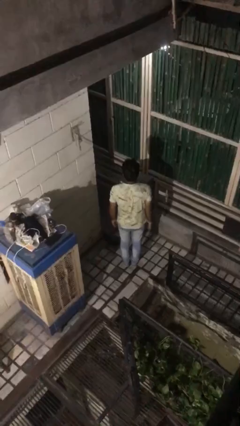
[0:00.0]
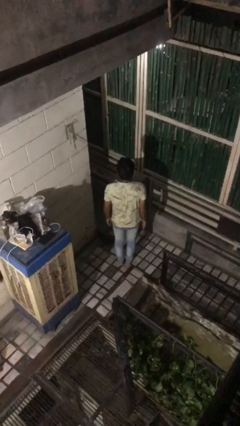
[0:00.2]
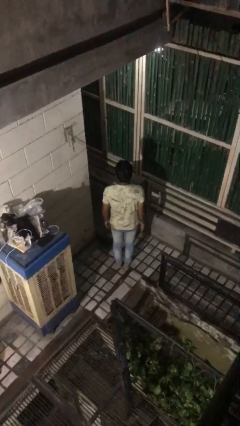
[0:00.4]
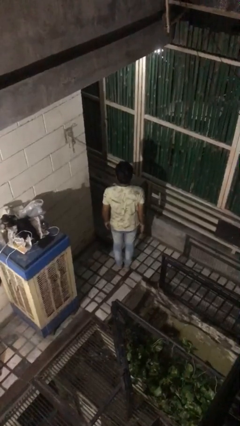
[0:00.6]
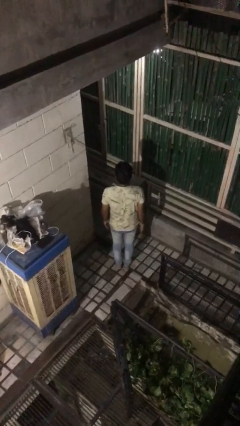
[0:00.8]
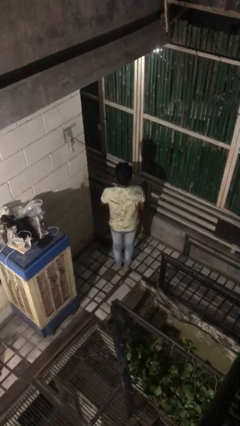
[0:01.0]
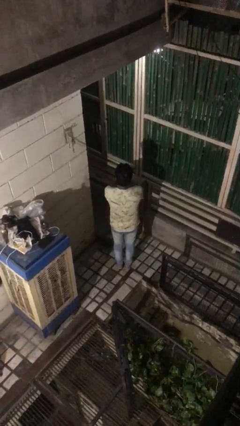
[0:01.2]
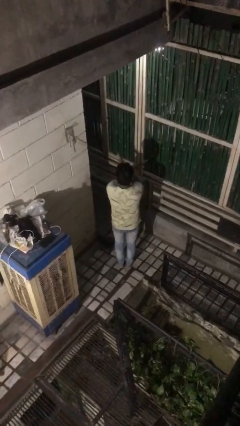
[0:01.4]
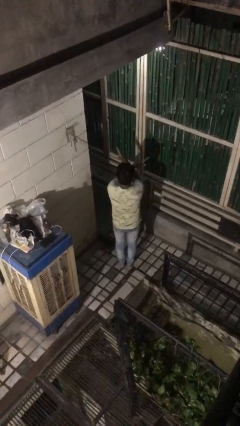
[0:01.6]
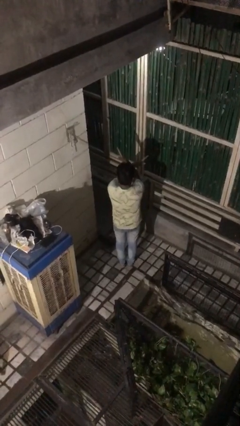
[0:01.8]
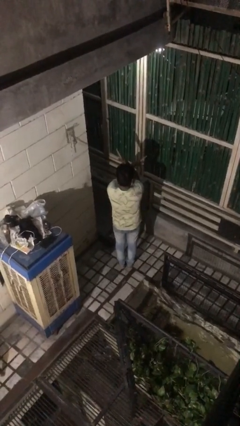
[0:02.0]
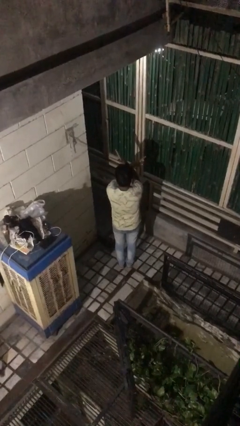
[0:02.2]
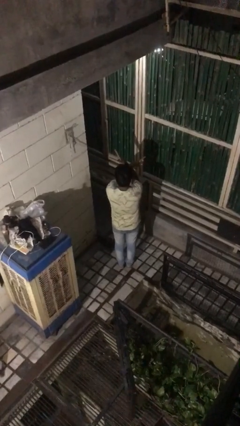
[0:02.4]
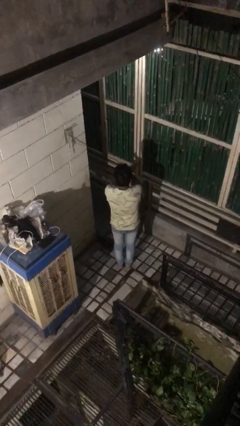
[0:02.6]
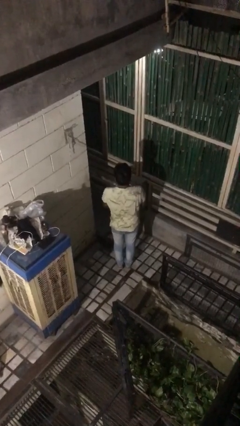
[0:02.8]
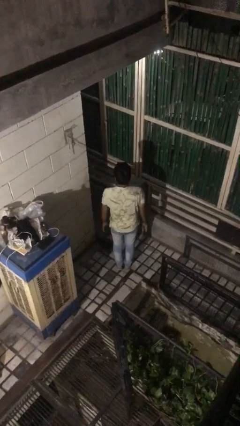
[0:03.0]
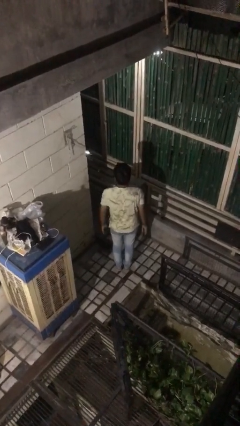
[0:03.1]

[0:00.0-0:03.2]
person gestures arms x

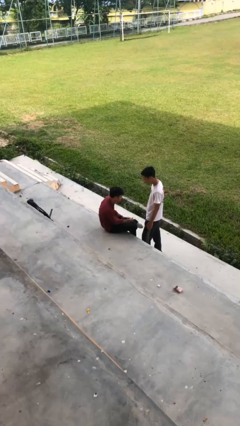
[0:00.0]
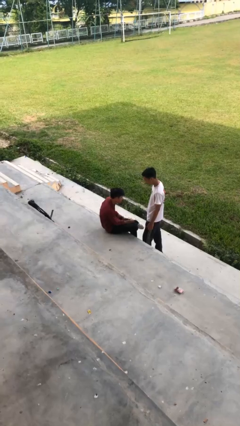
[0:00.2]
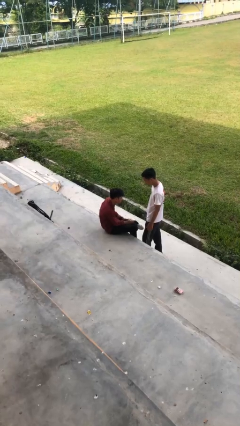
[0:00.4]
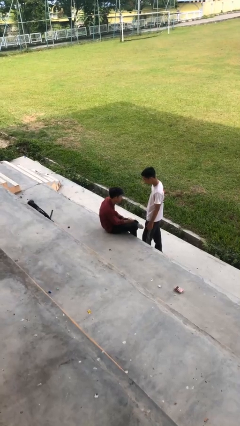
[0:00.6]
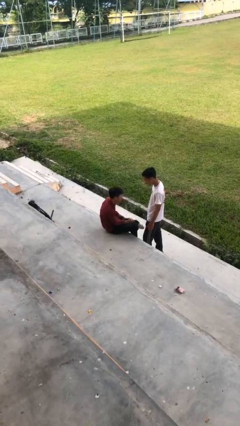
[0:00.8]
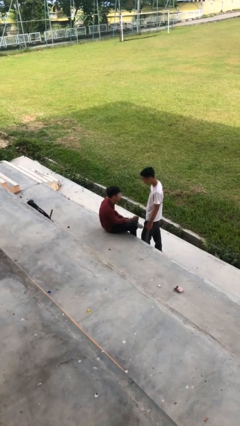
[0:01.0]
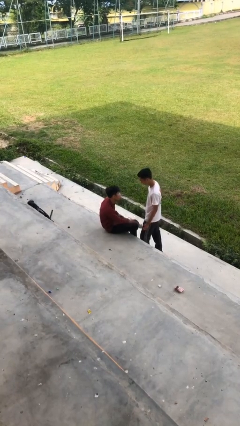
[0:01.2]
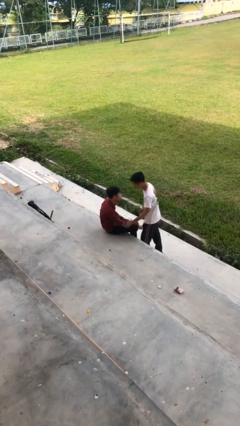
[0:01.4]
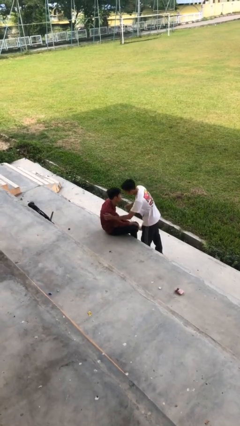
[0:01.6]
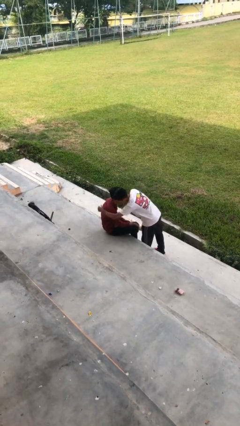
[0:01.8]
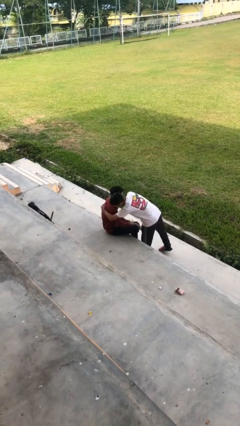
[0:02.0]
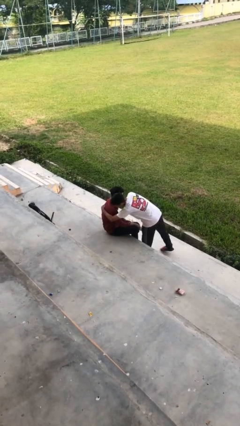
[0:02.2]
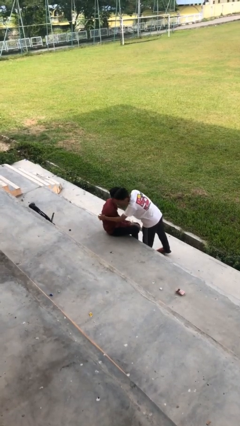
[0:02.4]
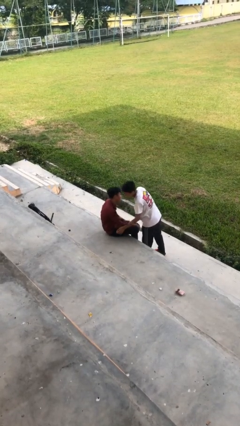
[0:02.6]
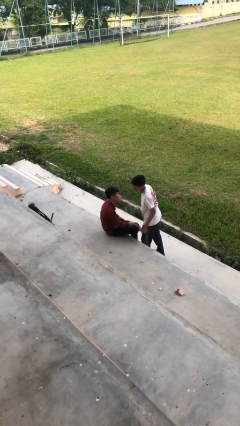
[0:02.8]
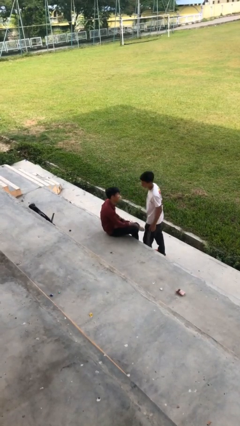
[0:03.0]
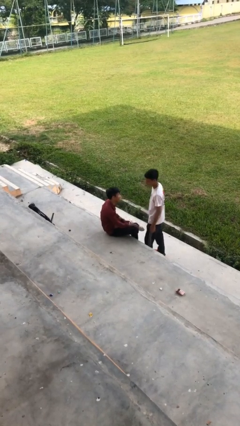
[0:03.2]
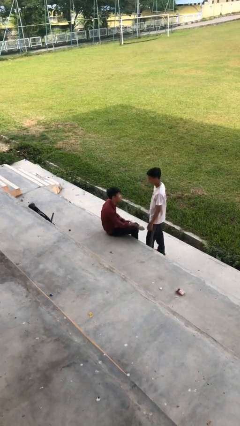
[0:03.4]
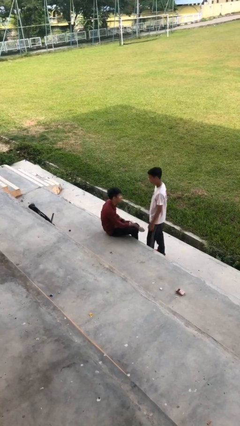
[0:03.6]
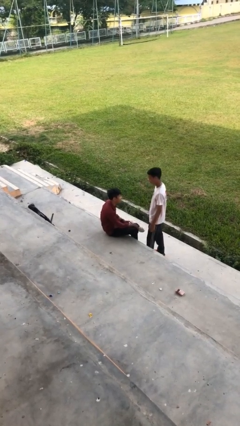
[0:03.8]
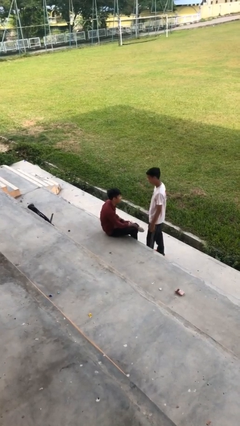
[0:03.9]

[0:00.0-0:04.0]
person embraces person

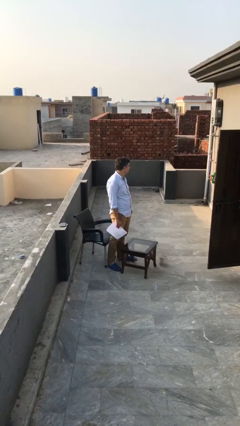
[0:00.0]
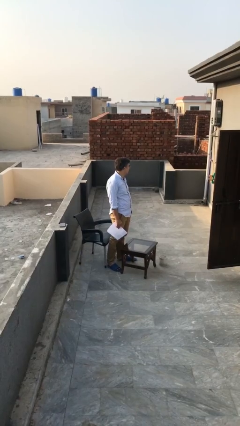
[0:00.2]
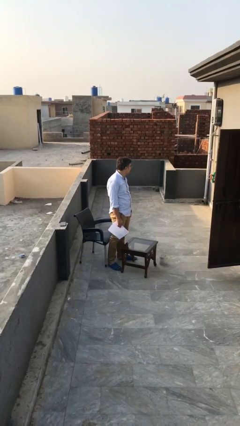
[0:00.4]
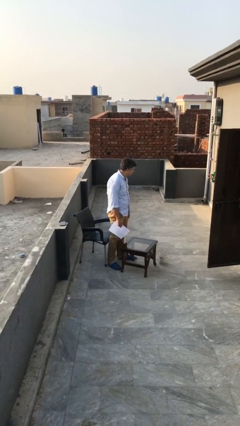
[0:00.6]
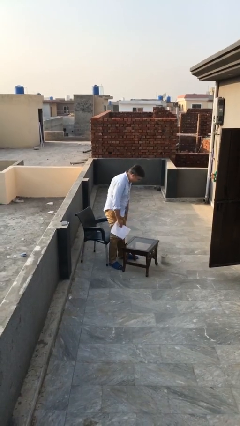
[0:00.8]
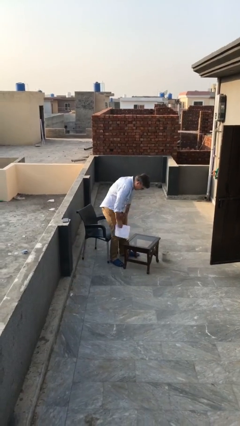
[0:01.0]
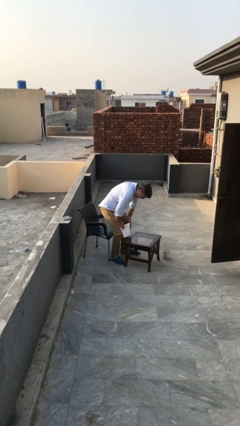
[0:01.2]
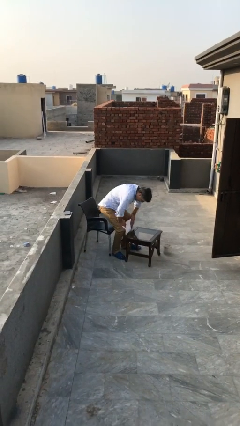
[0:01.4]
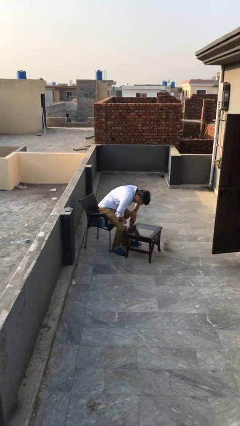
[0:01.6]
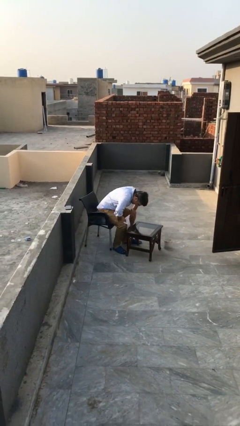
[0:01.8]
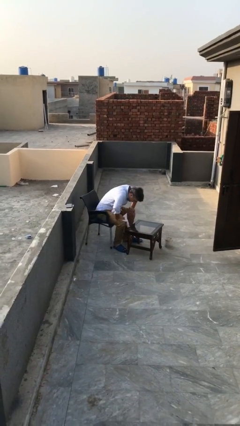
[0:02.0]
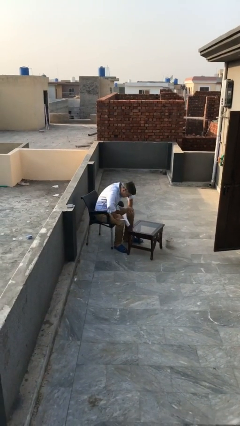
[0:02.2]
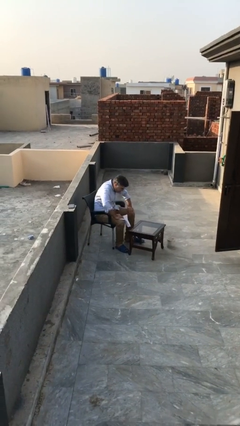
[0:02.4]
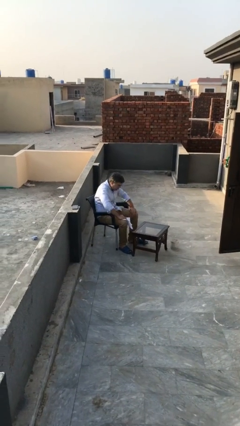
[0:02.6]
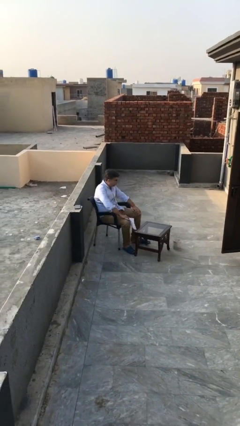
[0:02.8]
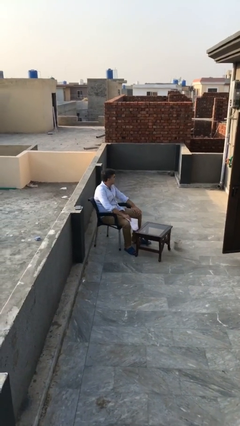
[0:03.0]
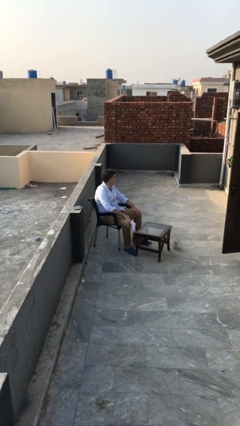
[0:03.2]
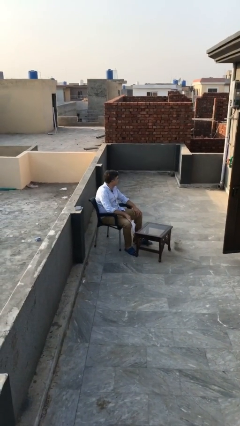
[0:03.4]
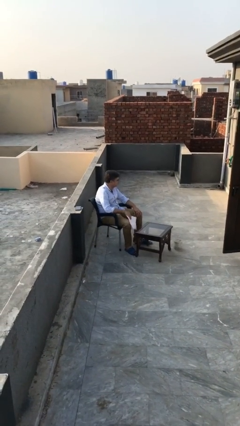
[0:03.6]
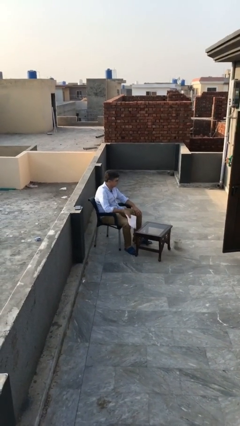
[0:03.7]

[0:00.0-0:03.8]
person sits down

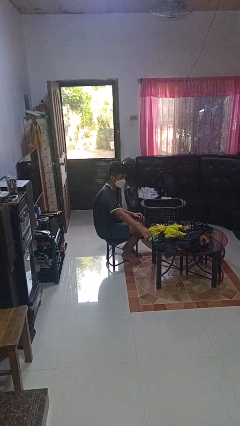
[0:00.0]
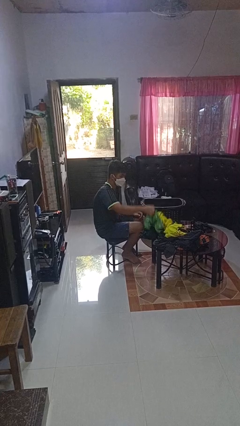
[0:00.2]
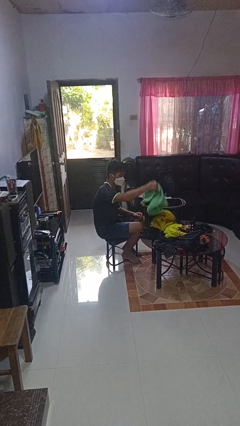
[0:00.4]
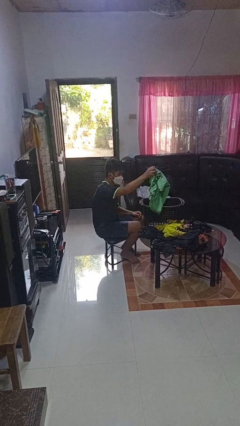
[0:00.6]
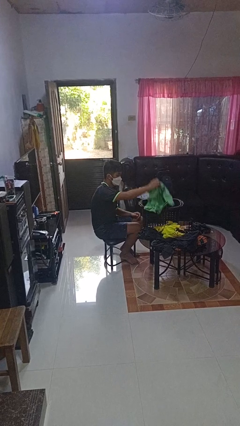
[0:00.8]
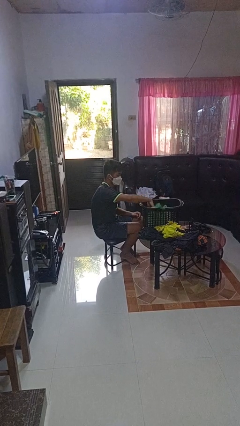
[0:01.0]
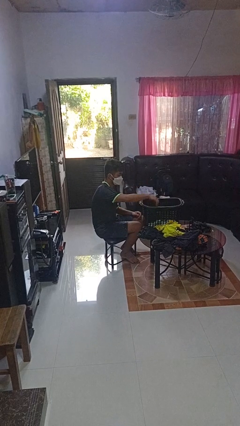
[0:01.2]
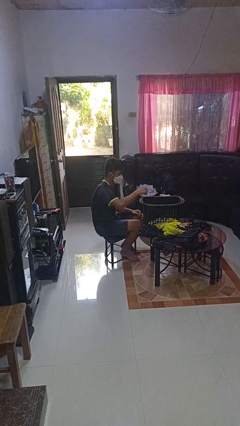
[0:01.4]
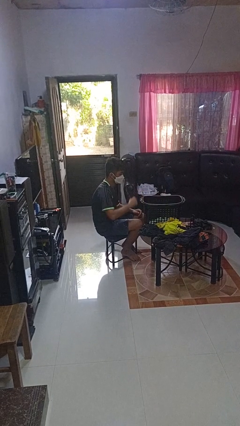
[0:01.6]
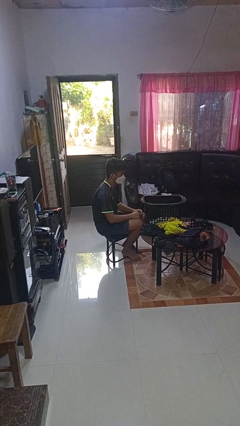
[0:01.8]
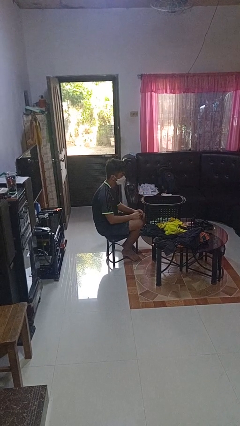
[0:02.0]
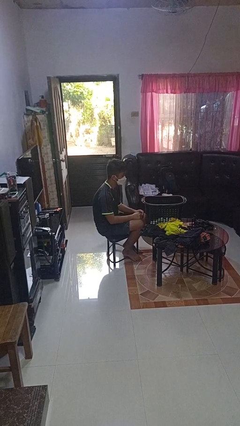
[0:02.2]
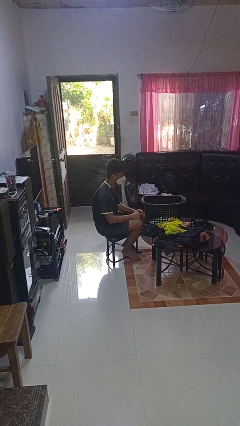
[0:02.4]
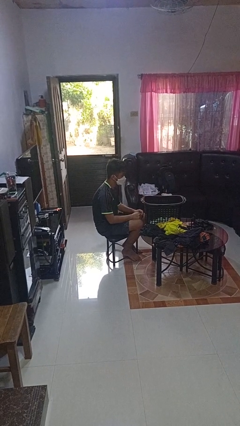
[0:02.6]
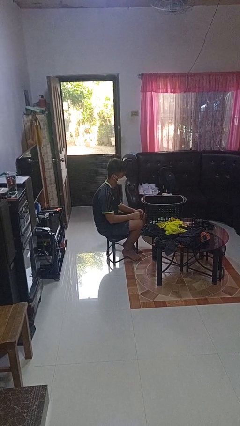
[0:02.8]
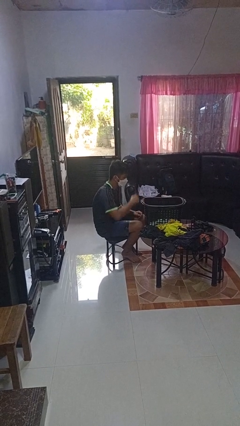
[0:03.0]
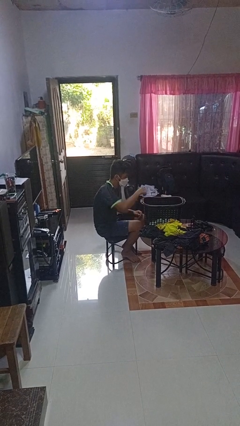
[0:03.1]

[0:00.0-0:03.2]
person puts object into basket

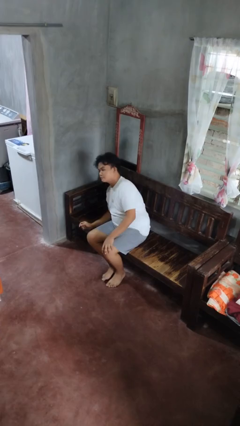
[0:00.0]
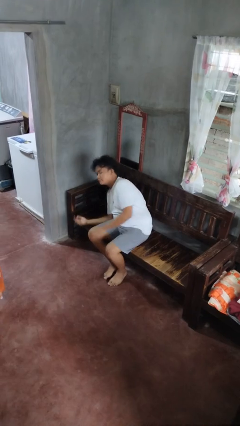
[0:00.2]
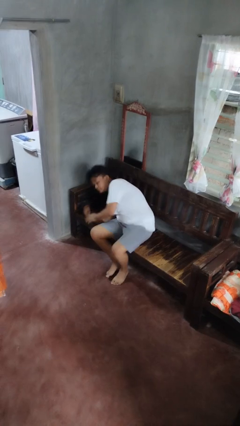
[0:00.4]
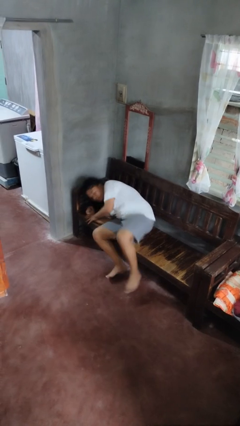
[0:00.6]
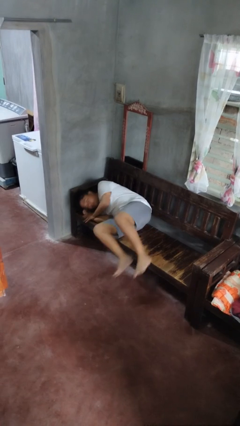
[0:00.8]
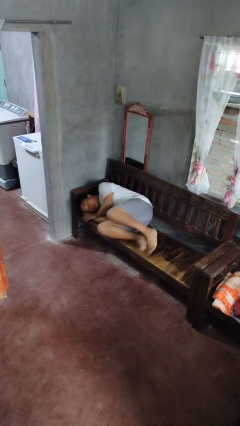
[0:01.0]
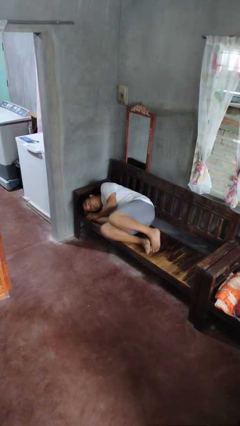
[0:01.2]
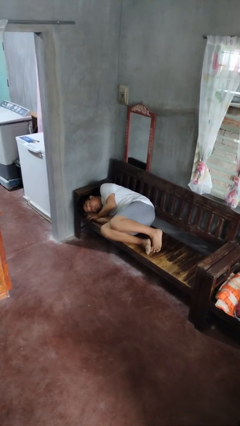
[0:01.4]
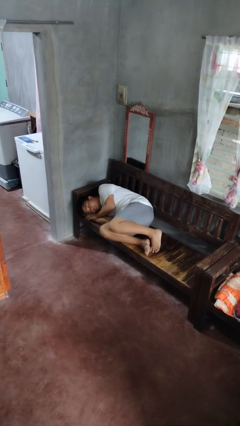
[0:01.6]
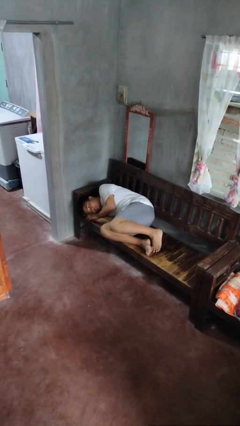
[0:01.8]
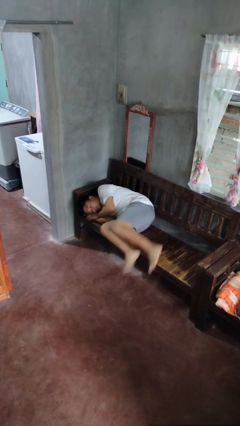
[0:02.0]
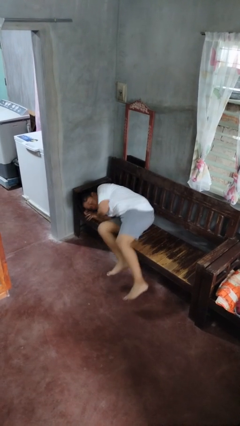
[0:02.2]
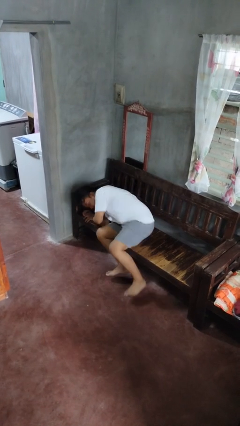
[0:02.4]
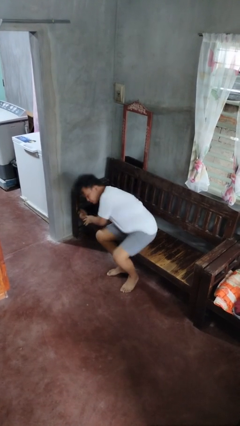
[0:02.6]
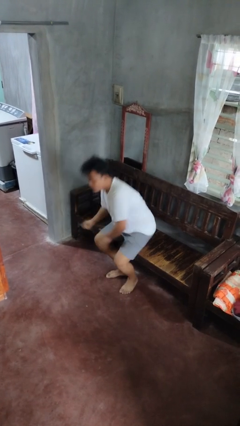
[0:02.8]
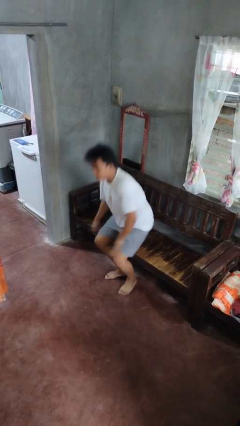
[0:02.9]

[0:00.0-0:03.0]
person lies down on couch
